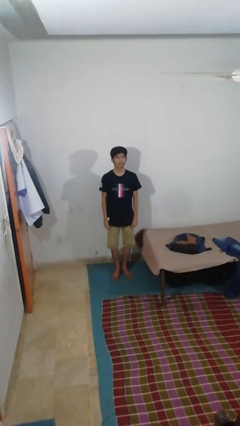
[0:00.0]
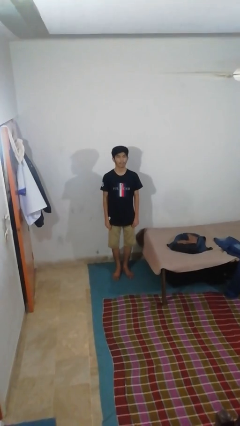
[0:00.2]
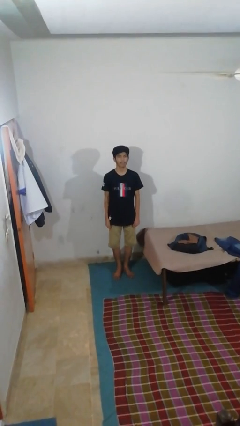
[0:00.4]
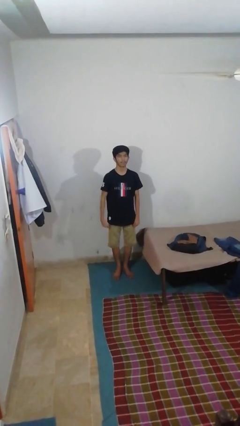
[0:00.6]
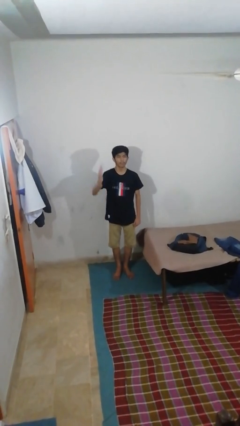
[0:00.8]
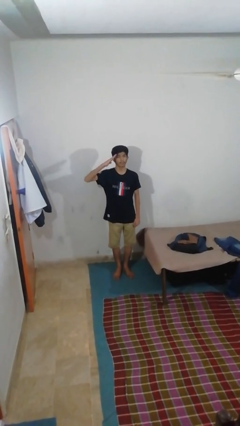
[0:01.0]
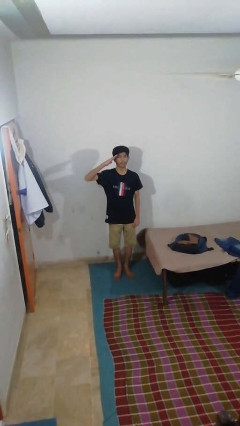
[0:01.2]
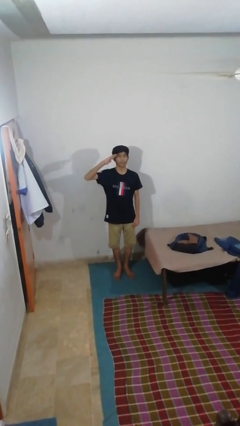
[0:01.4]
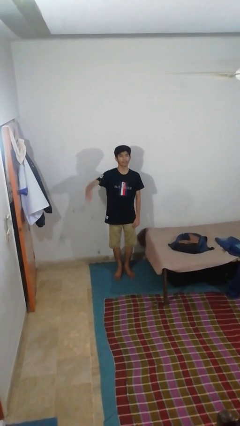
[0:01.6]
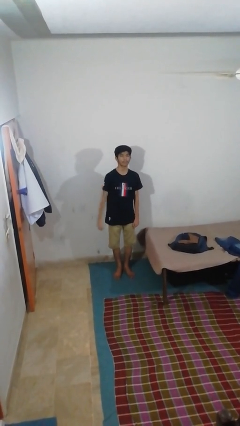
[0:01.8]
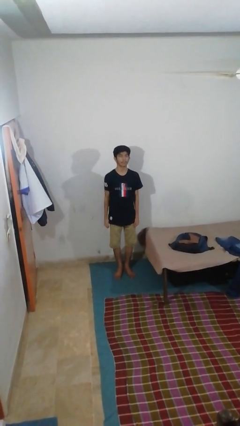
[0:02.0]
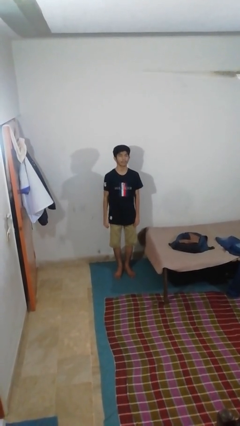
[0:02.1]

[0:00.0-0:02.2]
person salutes

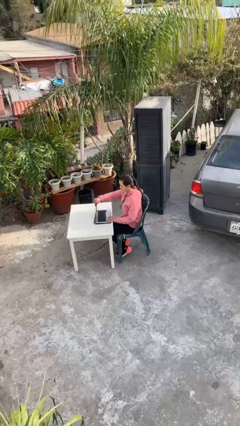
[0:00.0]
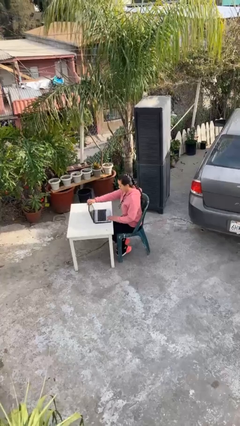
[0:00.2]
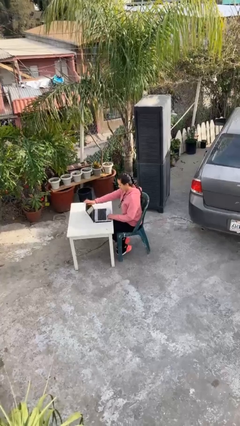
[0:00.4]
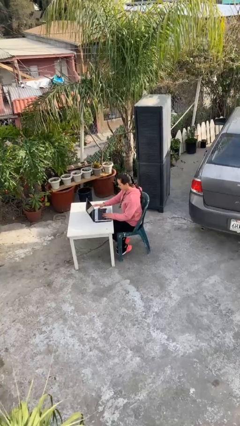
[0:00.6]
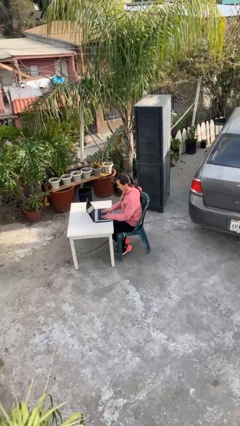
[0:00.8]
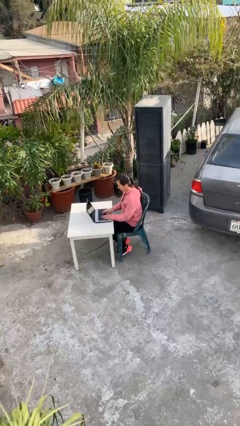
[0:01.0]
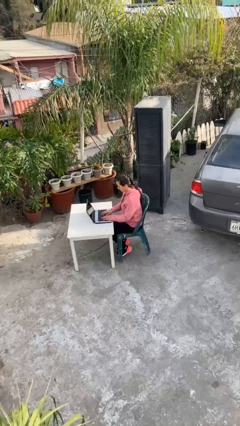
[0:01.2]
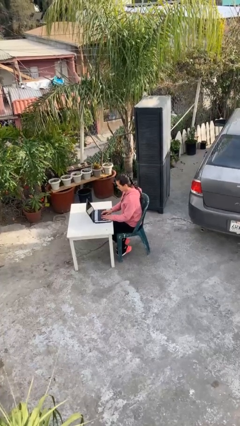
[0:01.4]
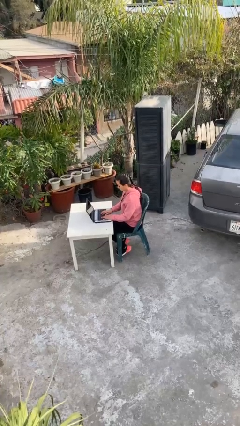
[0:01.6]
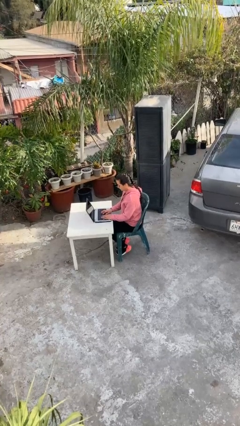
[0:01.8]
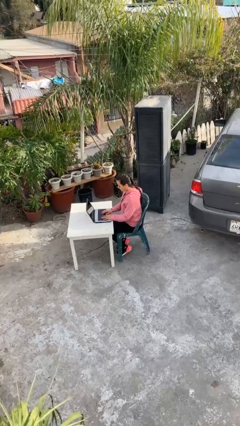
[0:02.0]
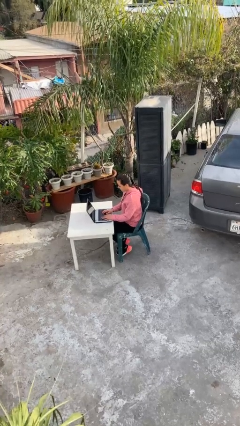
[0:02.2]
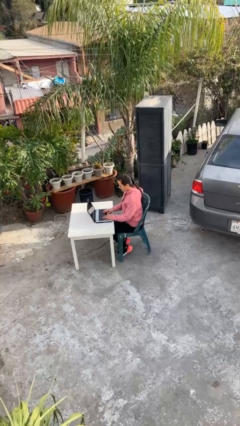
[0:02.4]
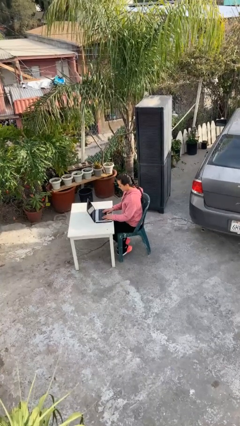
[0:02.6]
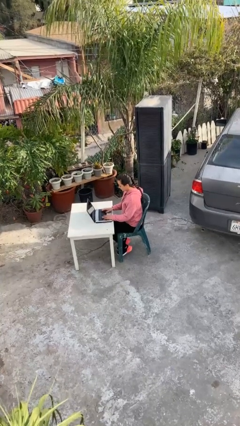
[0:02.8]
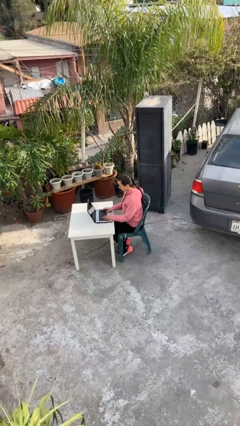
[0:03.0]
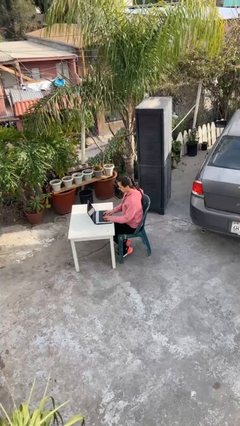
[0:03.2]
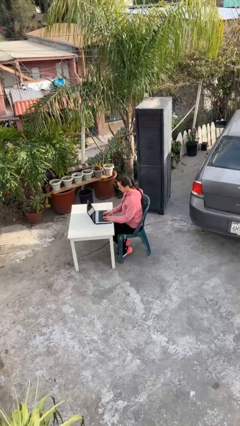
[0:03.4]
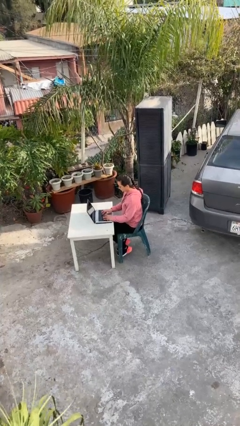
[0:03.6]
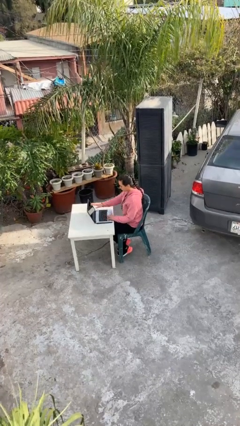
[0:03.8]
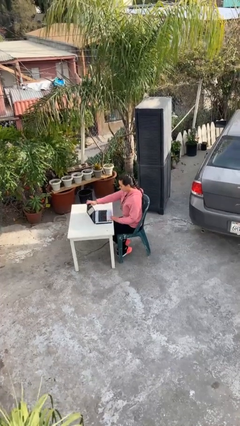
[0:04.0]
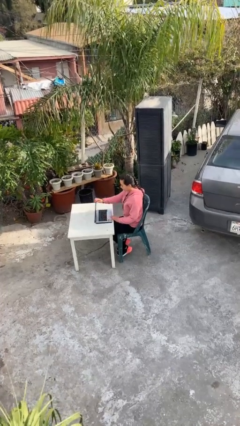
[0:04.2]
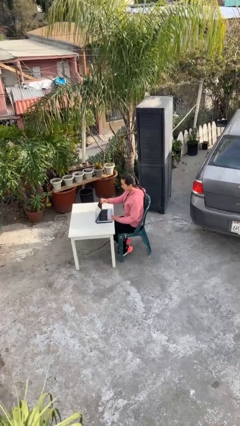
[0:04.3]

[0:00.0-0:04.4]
person interacts with laptop

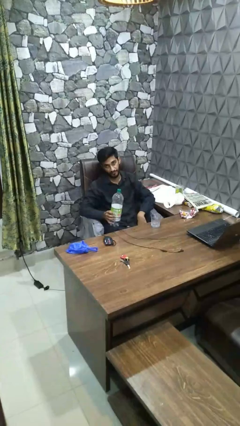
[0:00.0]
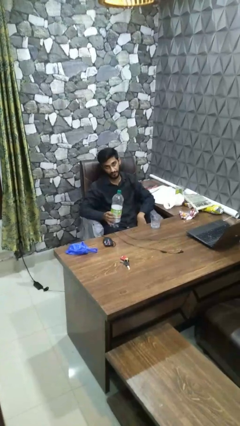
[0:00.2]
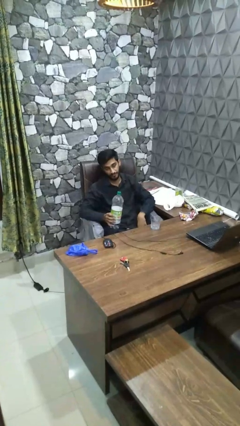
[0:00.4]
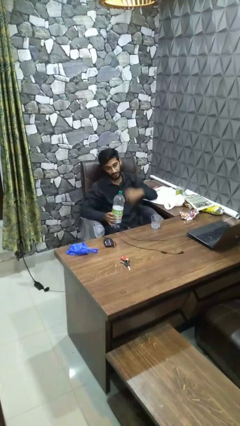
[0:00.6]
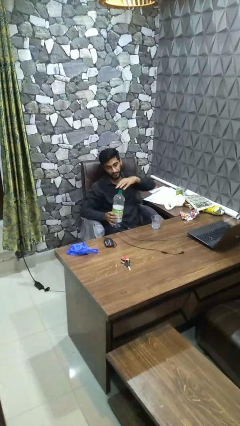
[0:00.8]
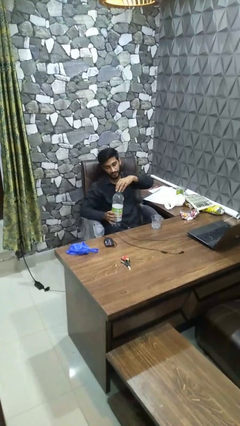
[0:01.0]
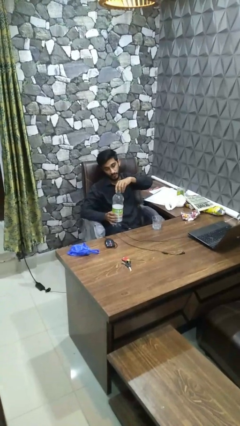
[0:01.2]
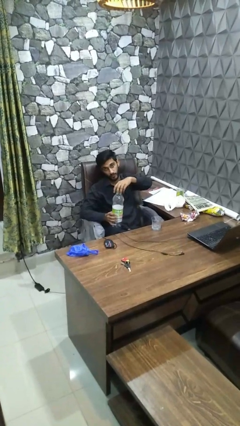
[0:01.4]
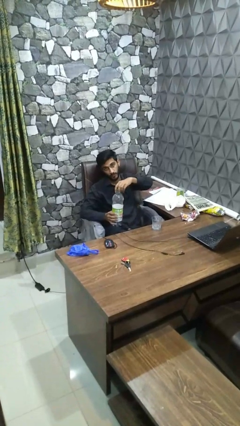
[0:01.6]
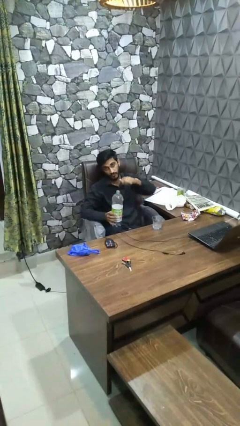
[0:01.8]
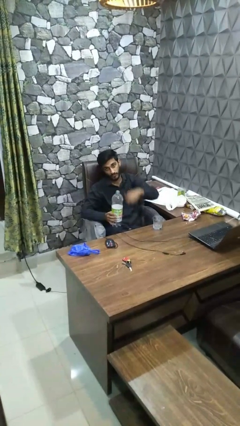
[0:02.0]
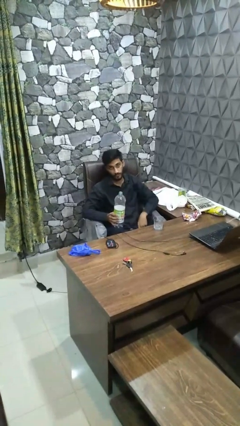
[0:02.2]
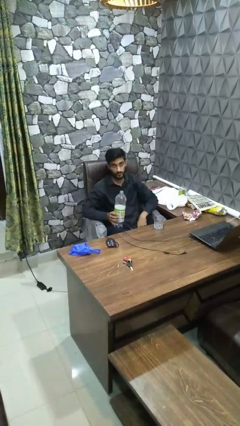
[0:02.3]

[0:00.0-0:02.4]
person unscrews lid from bottle

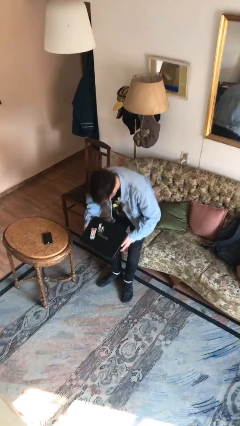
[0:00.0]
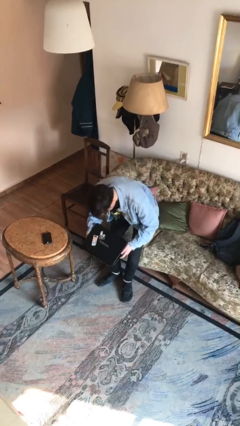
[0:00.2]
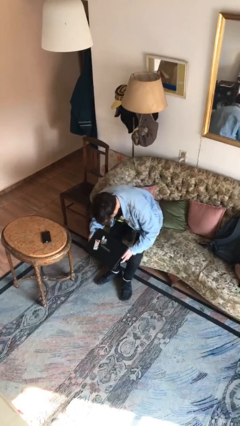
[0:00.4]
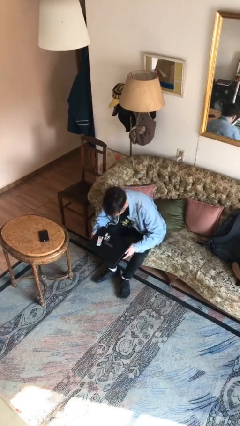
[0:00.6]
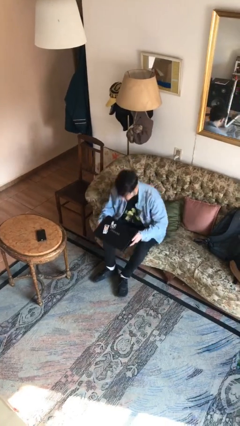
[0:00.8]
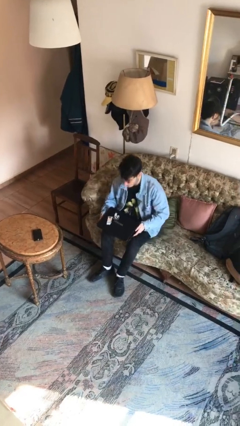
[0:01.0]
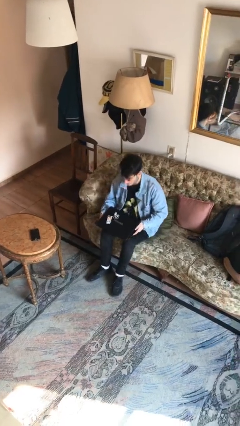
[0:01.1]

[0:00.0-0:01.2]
person sits down

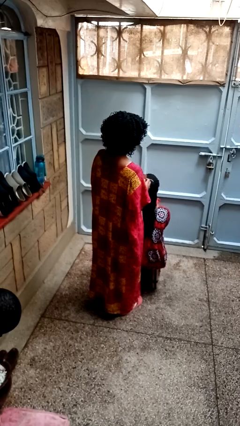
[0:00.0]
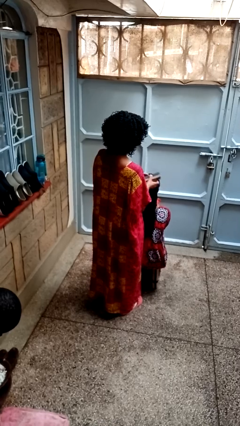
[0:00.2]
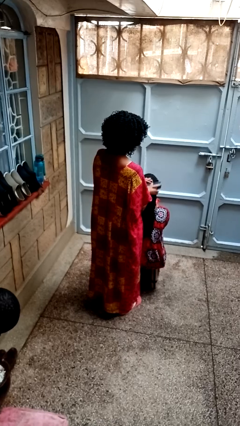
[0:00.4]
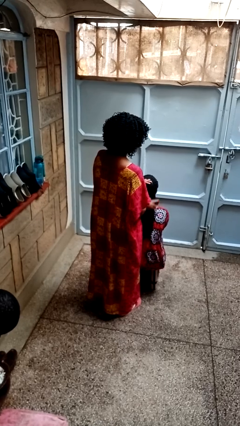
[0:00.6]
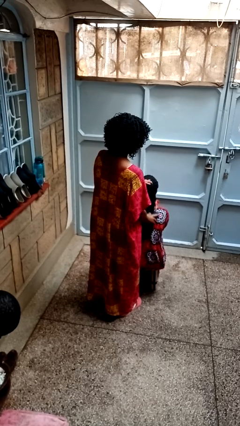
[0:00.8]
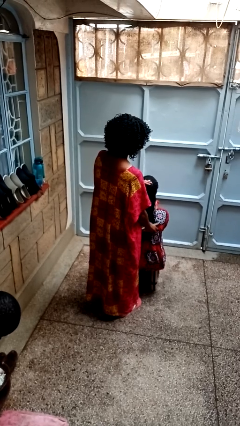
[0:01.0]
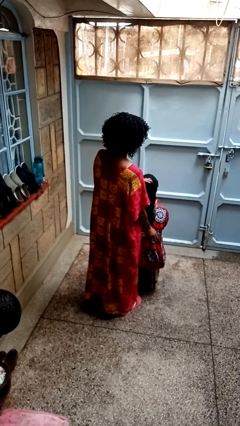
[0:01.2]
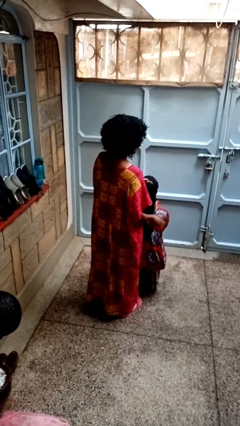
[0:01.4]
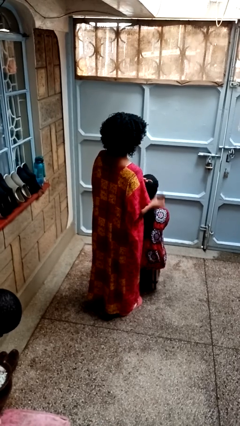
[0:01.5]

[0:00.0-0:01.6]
person brushes hair of person

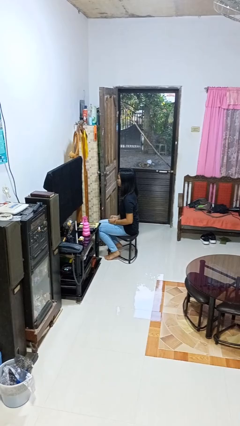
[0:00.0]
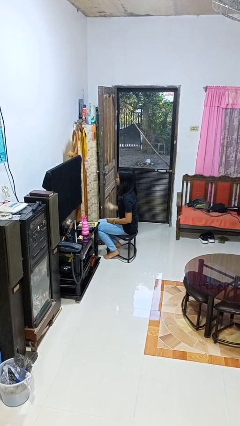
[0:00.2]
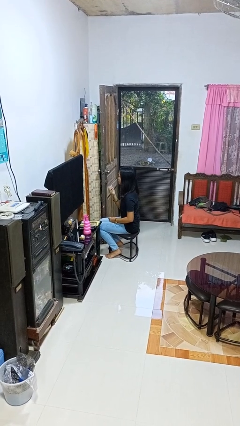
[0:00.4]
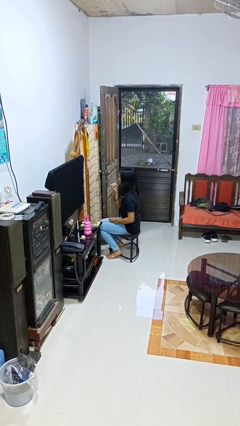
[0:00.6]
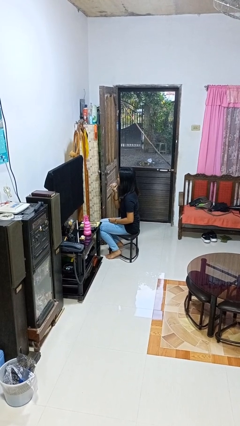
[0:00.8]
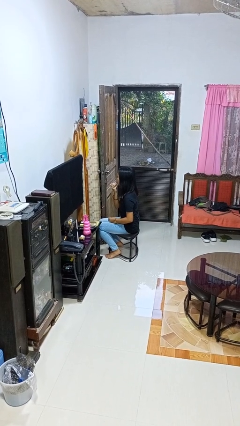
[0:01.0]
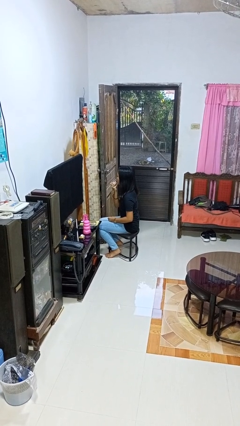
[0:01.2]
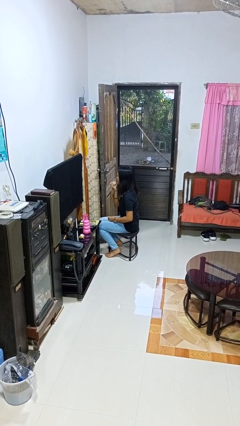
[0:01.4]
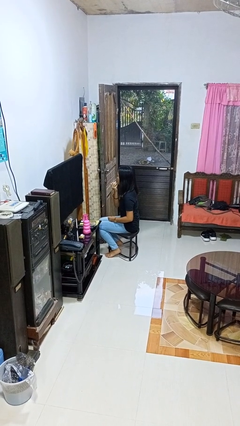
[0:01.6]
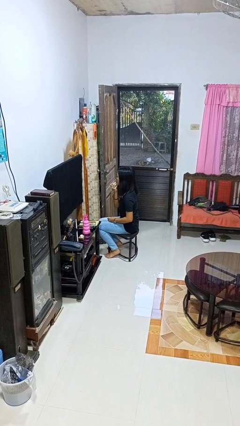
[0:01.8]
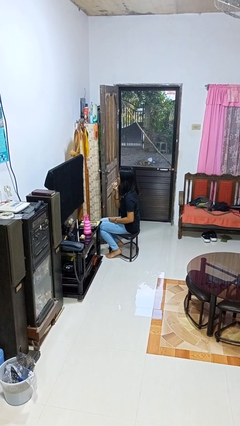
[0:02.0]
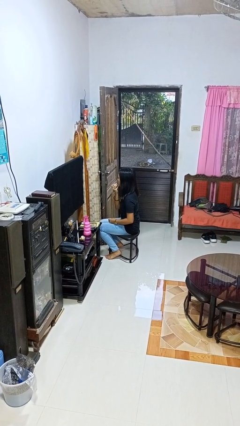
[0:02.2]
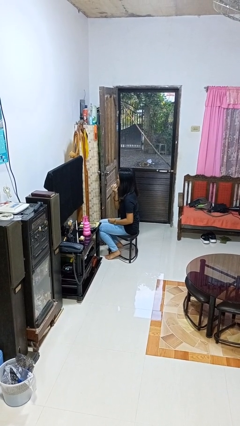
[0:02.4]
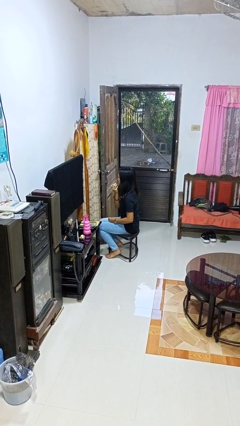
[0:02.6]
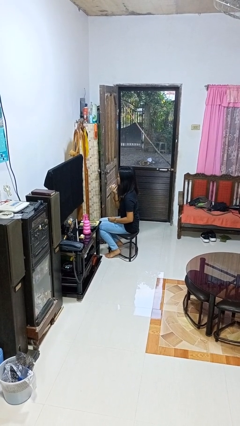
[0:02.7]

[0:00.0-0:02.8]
person applies lip makeup

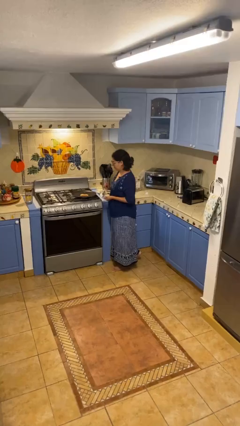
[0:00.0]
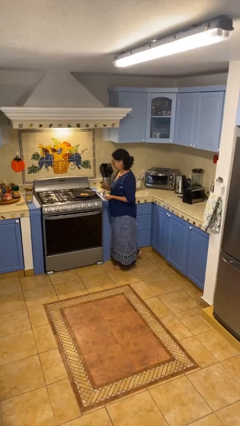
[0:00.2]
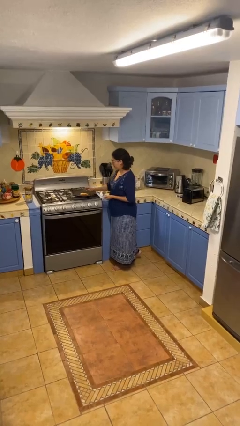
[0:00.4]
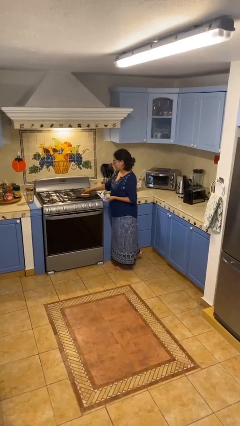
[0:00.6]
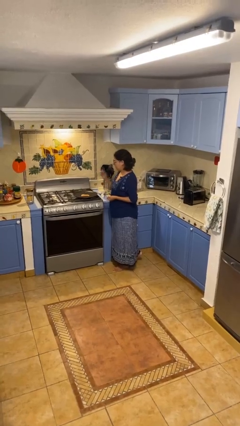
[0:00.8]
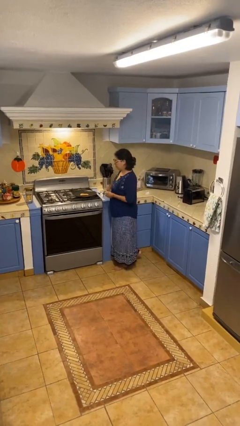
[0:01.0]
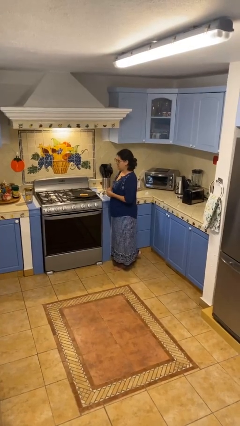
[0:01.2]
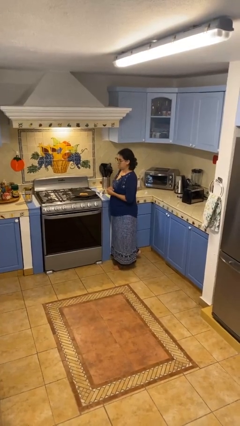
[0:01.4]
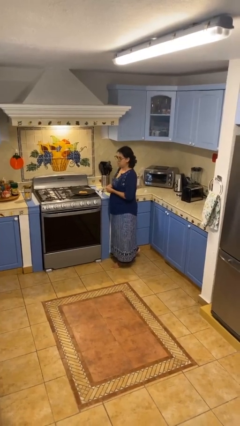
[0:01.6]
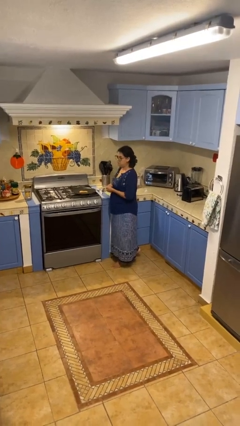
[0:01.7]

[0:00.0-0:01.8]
person burns hand

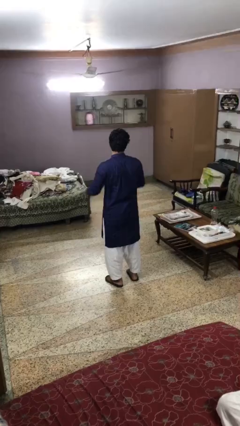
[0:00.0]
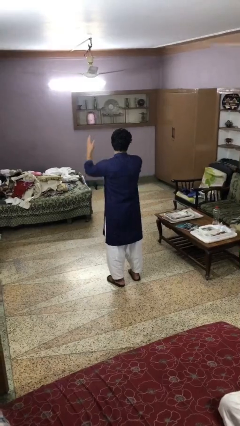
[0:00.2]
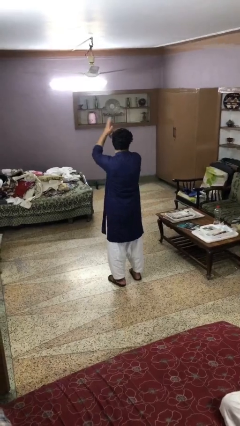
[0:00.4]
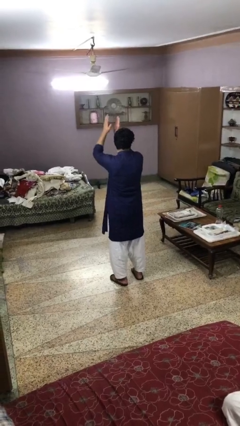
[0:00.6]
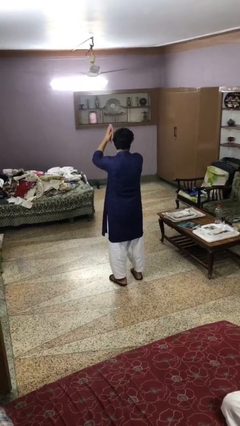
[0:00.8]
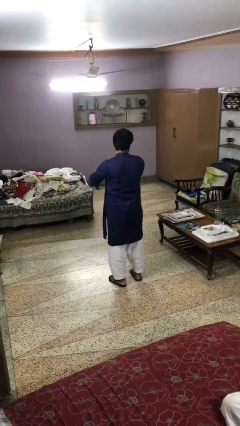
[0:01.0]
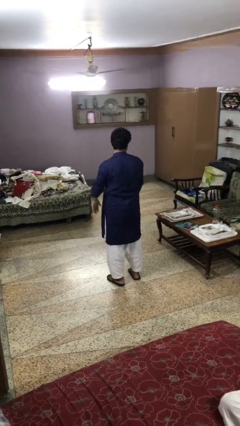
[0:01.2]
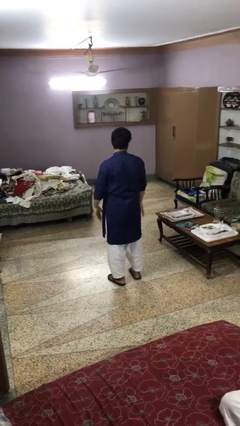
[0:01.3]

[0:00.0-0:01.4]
person claps hands
